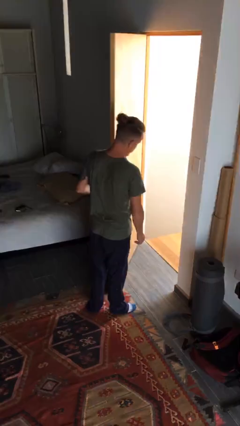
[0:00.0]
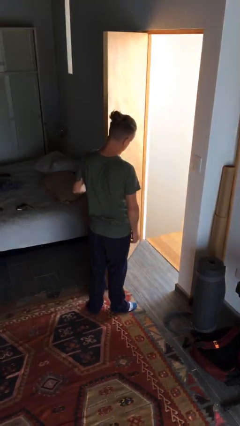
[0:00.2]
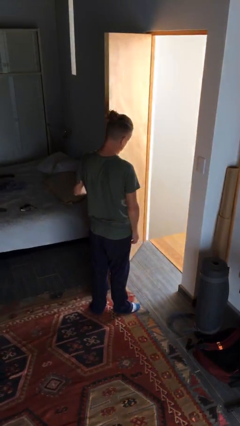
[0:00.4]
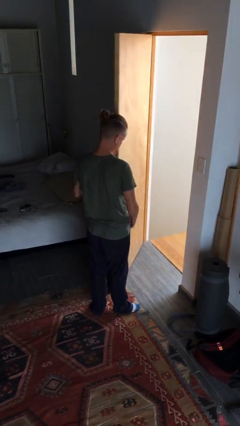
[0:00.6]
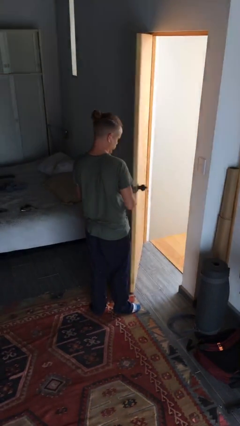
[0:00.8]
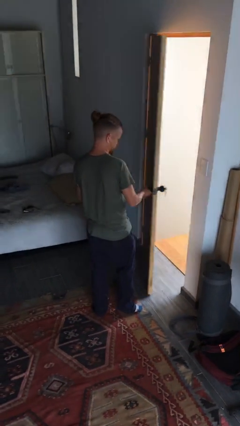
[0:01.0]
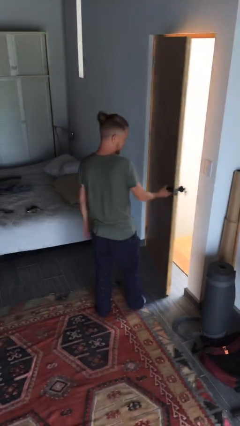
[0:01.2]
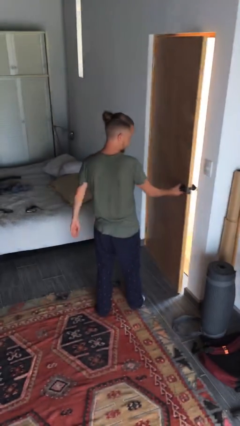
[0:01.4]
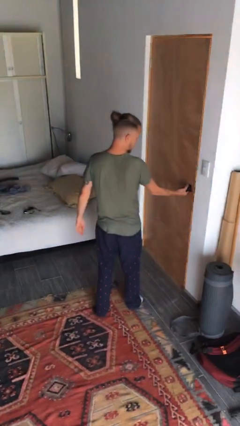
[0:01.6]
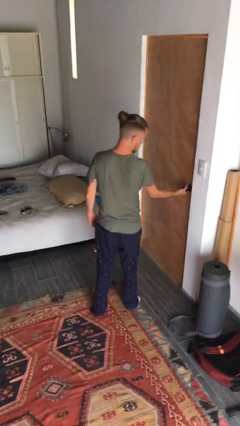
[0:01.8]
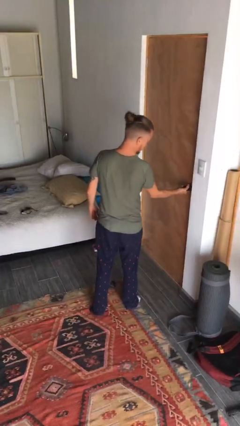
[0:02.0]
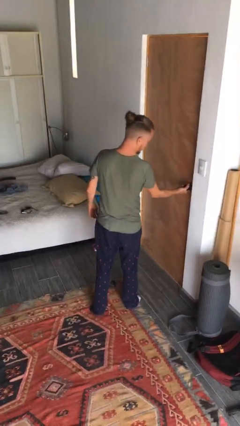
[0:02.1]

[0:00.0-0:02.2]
person closes facility door

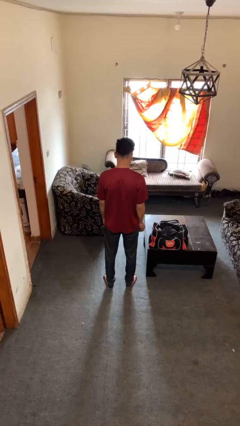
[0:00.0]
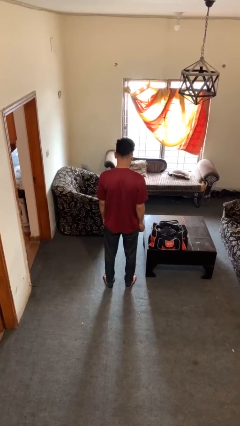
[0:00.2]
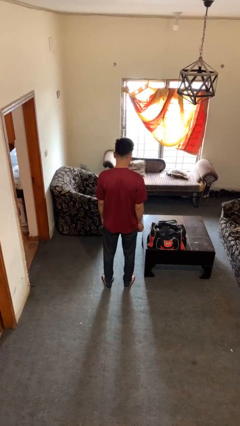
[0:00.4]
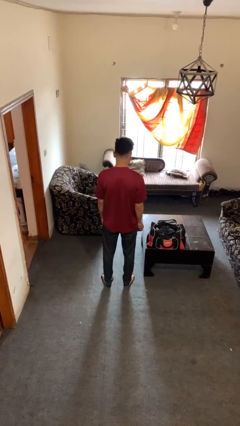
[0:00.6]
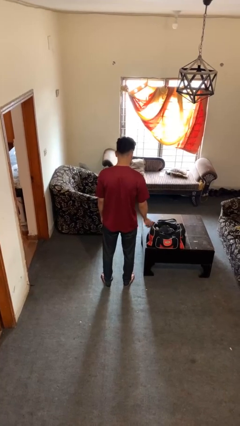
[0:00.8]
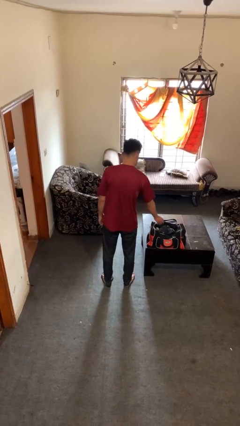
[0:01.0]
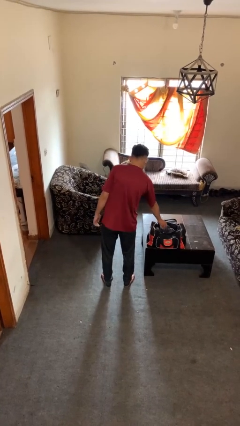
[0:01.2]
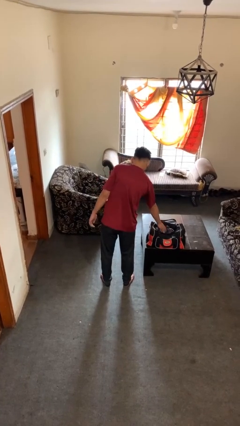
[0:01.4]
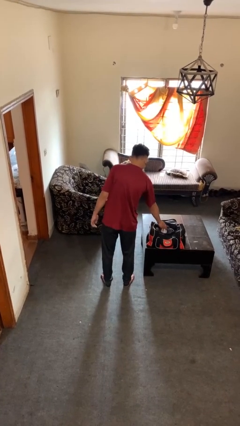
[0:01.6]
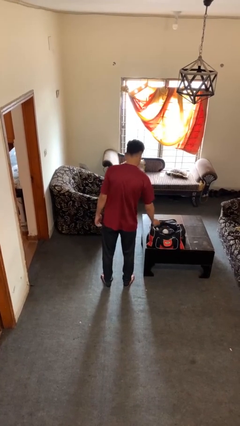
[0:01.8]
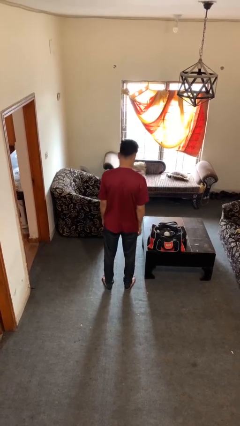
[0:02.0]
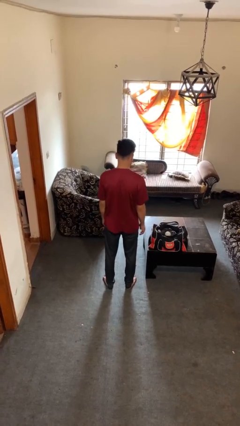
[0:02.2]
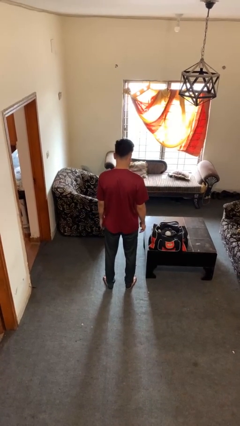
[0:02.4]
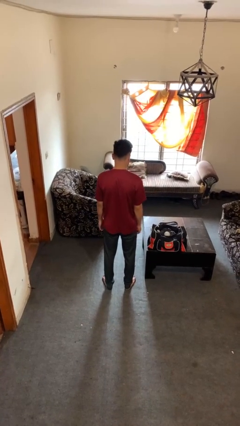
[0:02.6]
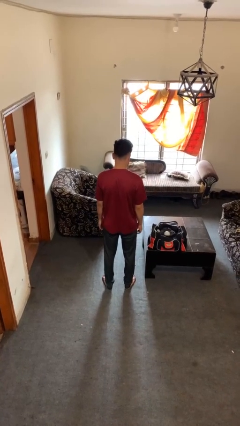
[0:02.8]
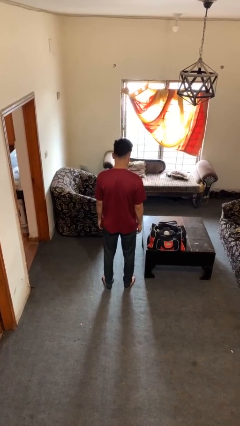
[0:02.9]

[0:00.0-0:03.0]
person puts object into bag

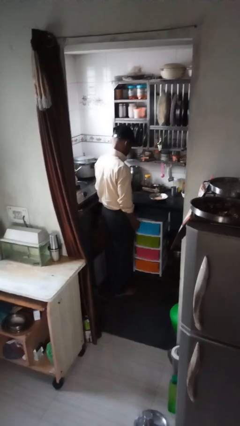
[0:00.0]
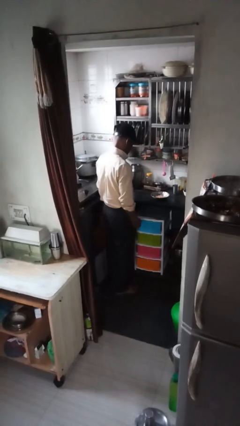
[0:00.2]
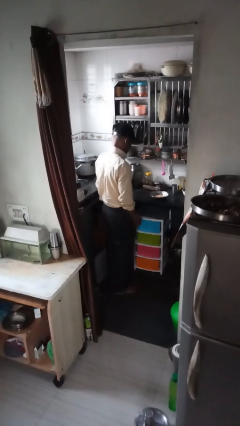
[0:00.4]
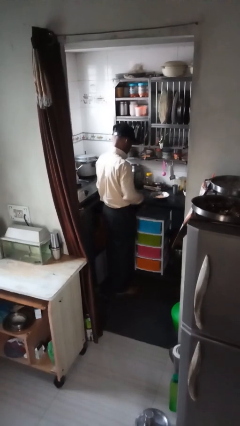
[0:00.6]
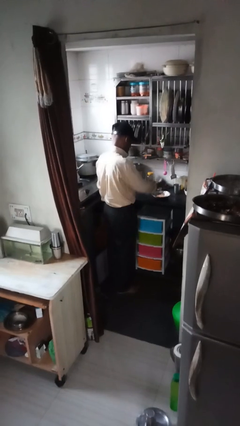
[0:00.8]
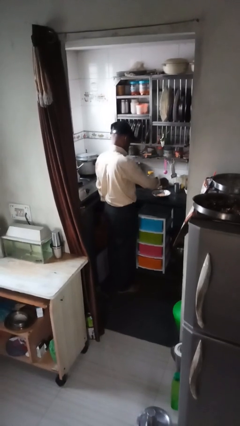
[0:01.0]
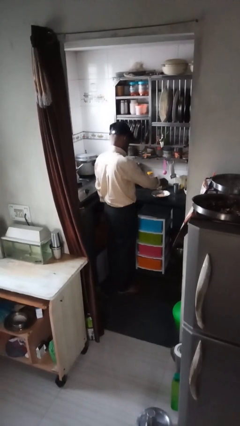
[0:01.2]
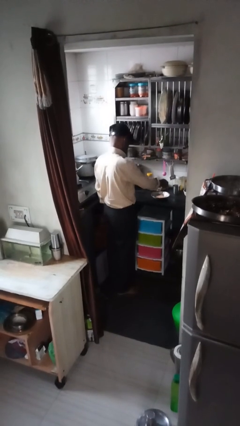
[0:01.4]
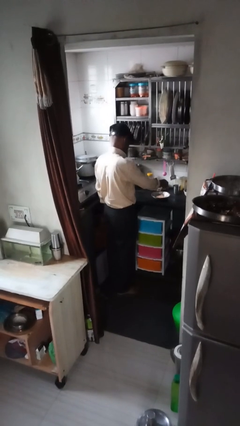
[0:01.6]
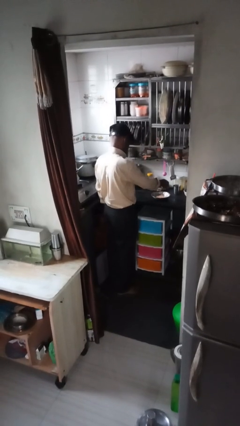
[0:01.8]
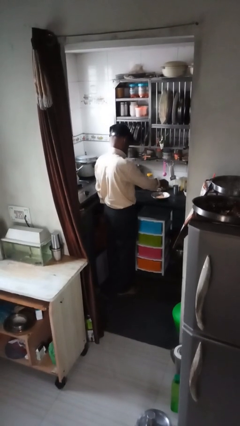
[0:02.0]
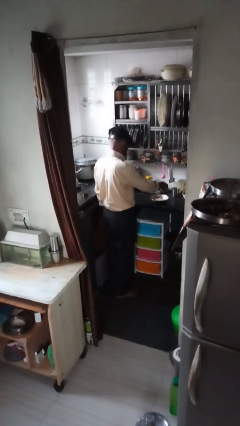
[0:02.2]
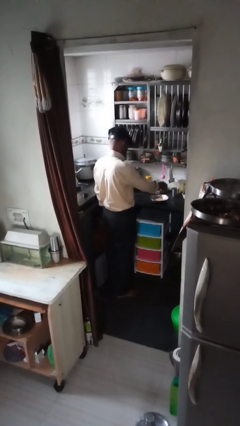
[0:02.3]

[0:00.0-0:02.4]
person pours into bowl

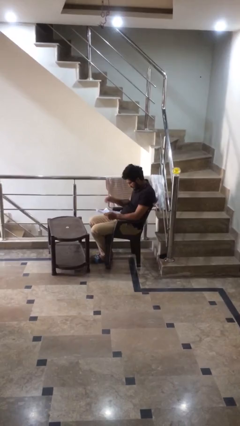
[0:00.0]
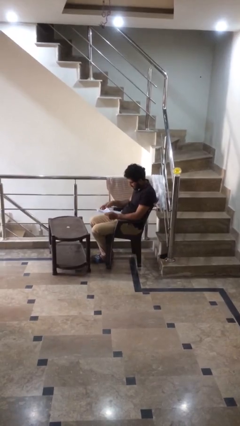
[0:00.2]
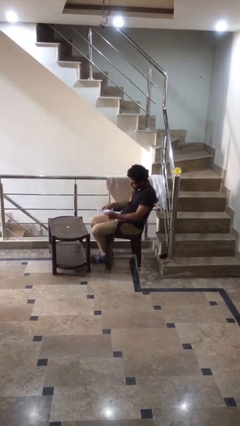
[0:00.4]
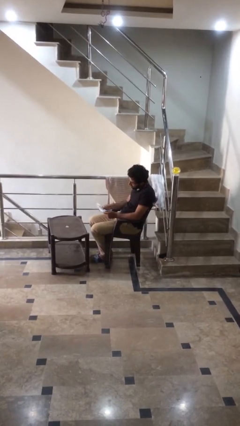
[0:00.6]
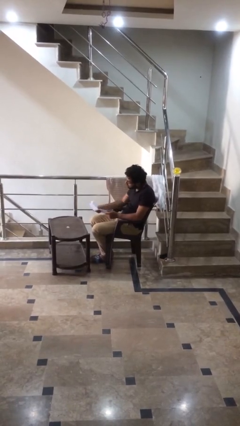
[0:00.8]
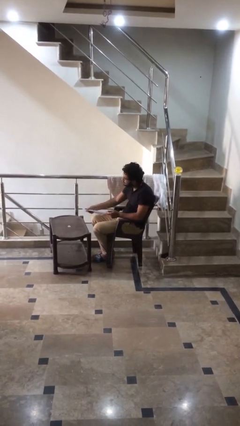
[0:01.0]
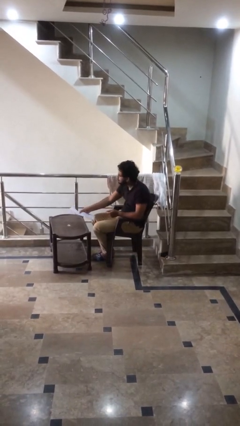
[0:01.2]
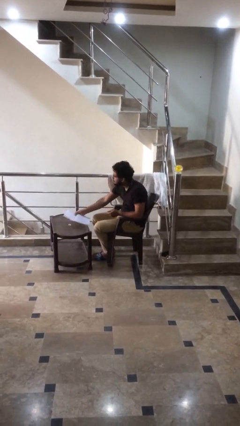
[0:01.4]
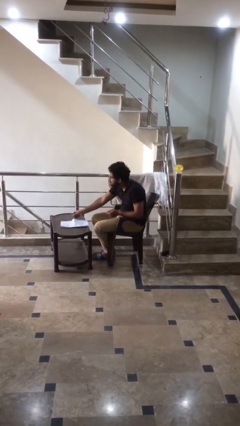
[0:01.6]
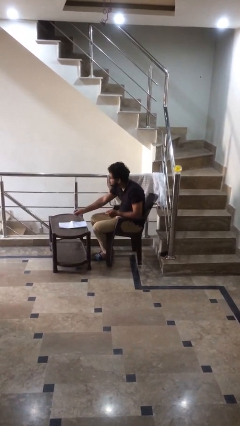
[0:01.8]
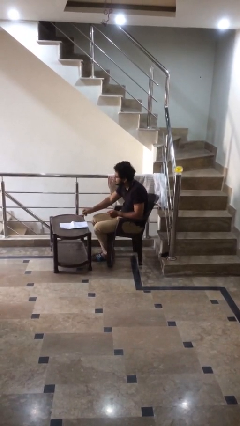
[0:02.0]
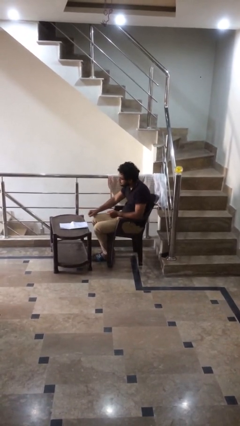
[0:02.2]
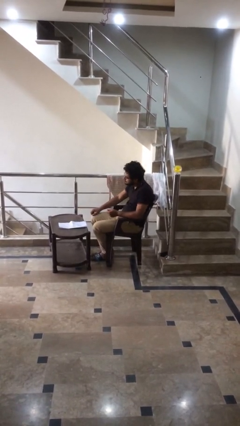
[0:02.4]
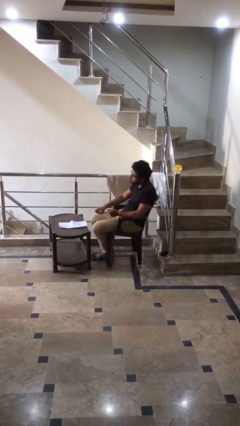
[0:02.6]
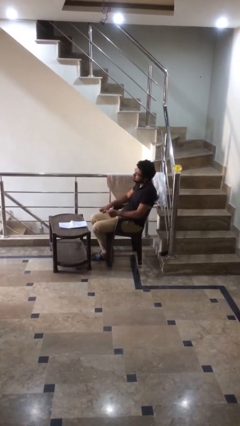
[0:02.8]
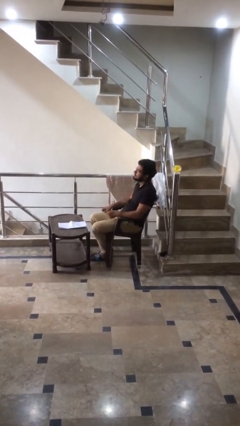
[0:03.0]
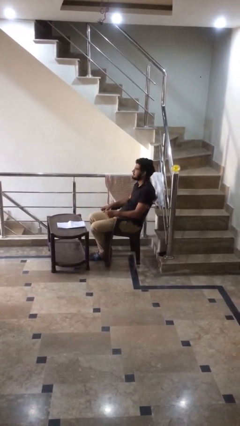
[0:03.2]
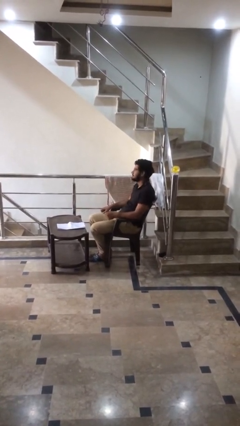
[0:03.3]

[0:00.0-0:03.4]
person puts down object on table

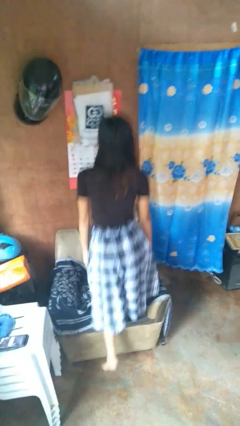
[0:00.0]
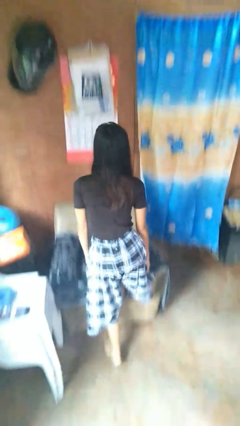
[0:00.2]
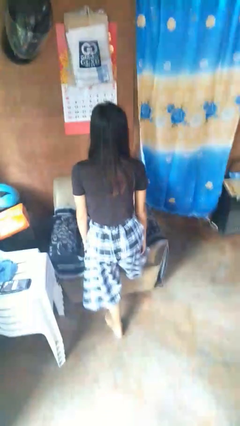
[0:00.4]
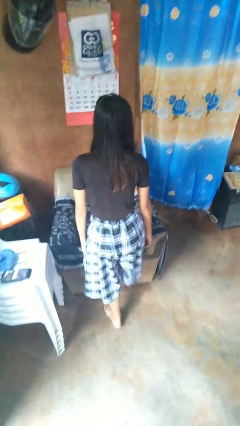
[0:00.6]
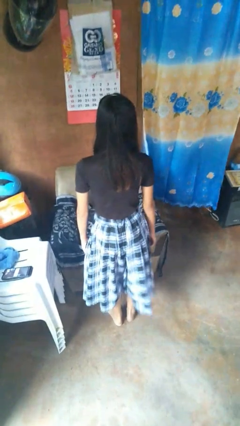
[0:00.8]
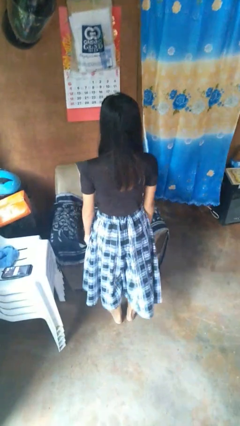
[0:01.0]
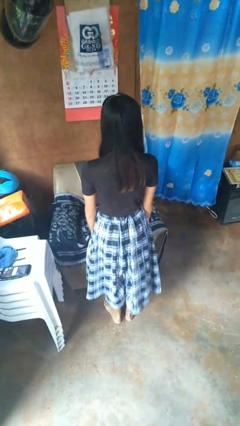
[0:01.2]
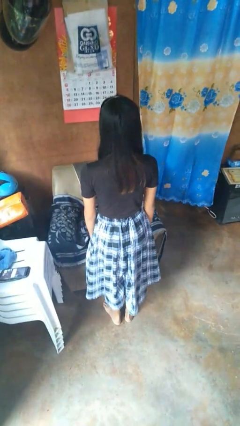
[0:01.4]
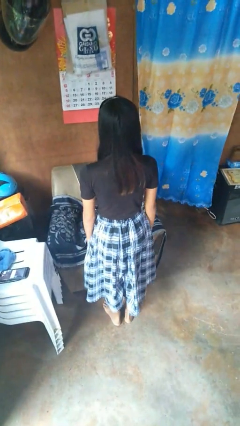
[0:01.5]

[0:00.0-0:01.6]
person climbs off couch

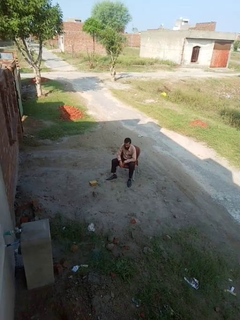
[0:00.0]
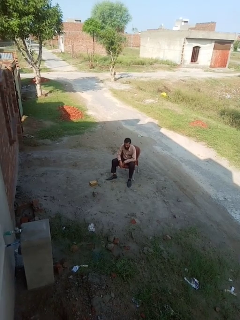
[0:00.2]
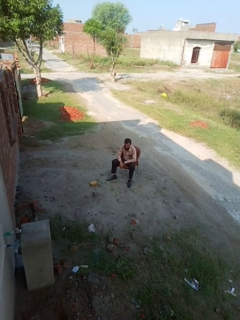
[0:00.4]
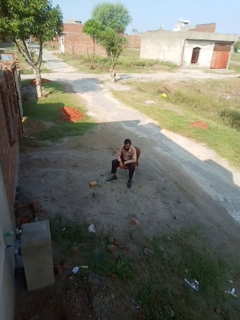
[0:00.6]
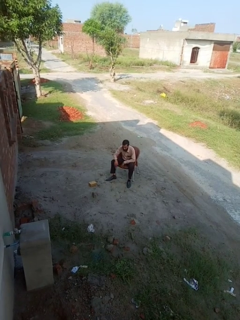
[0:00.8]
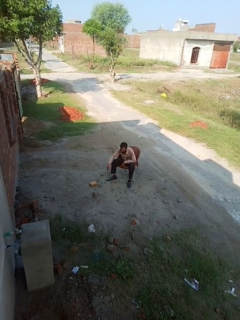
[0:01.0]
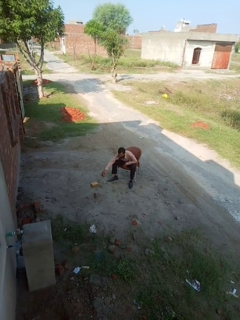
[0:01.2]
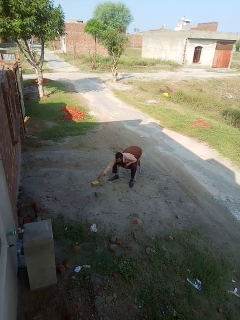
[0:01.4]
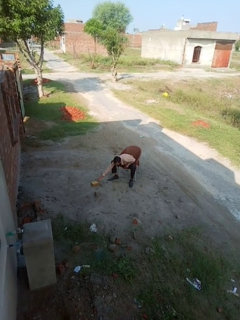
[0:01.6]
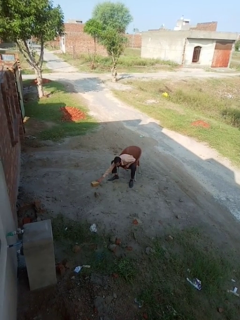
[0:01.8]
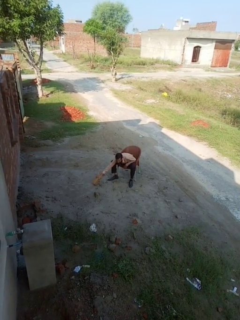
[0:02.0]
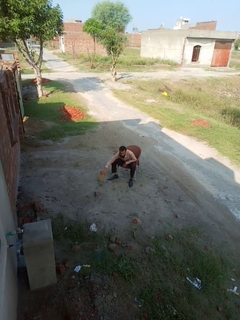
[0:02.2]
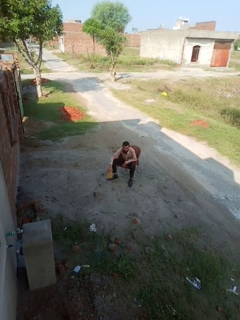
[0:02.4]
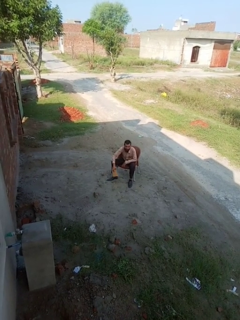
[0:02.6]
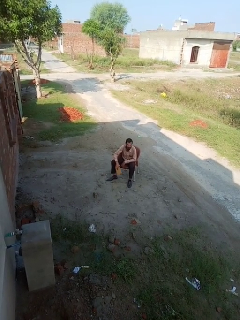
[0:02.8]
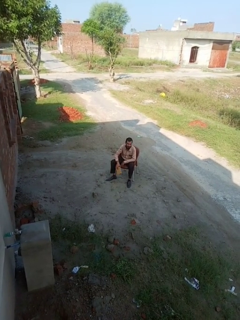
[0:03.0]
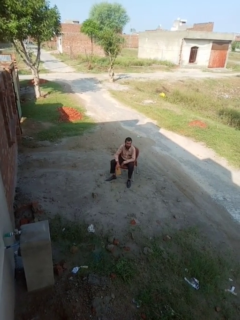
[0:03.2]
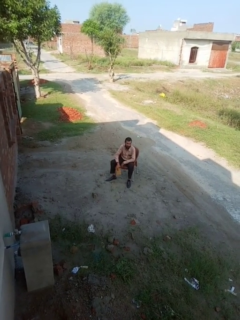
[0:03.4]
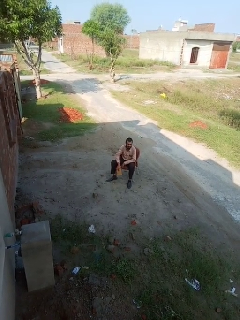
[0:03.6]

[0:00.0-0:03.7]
person picks up object from floor

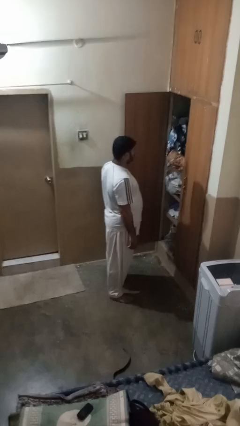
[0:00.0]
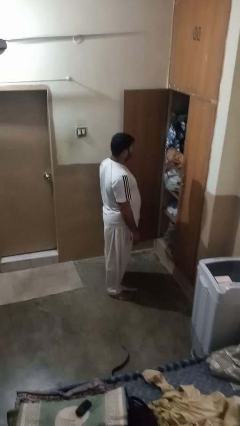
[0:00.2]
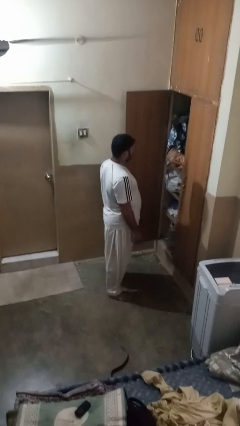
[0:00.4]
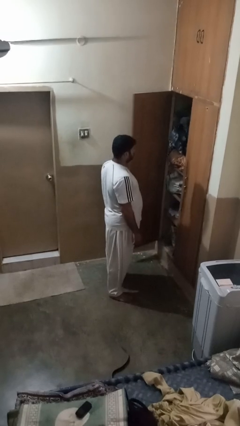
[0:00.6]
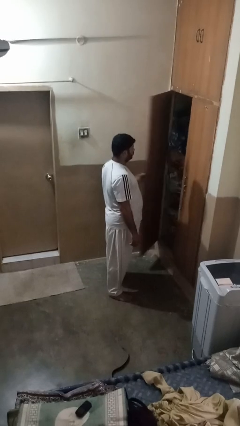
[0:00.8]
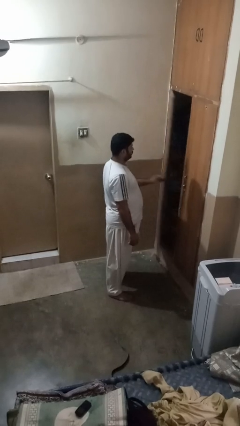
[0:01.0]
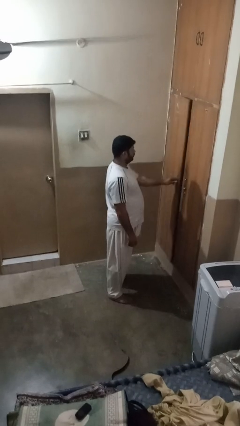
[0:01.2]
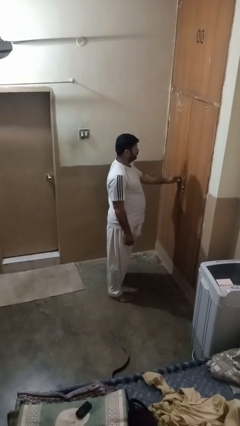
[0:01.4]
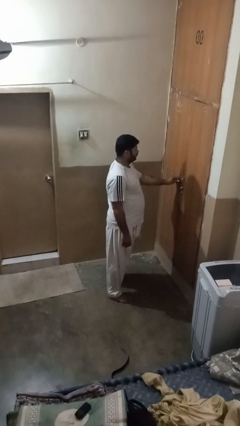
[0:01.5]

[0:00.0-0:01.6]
person closes closet door
